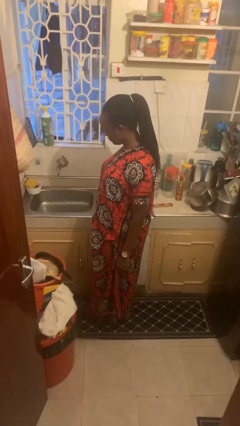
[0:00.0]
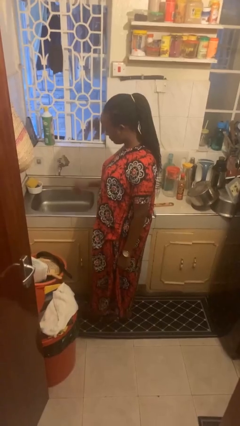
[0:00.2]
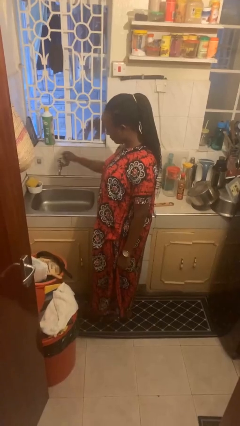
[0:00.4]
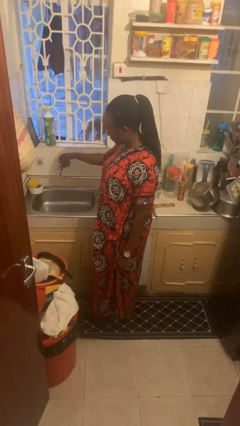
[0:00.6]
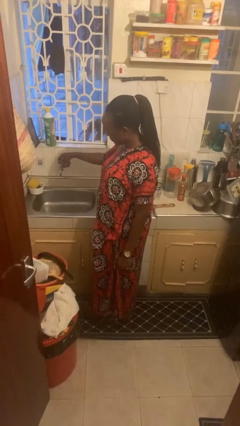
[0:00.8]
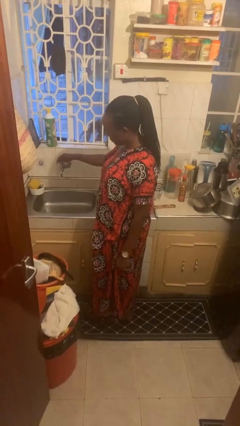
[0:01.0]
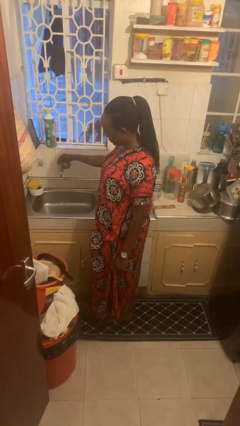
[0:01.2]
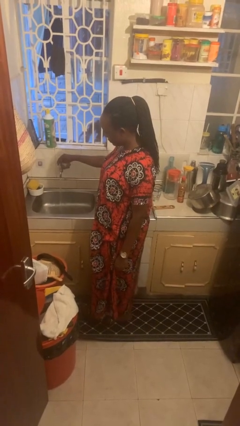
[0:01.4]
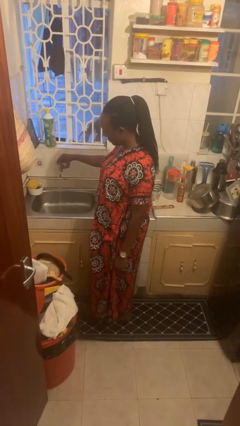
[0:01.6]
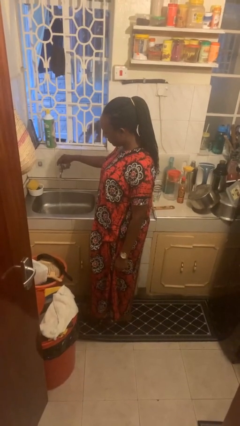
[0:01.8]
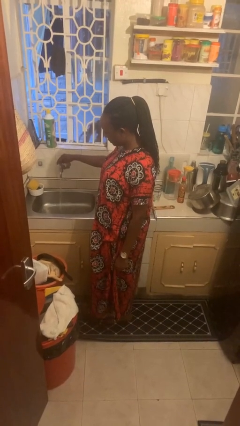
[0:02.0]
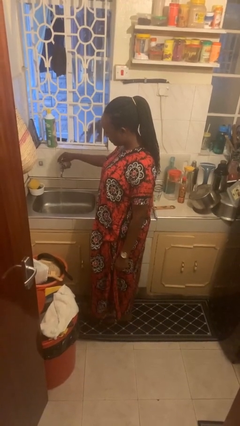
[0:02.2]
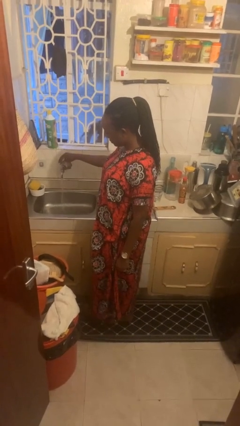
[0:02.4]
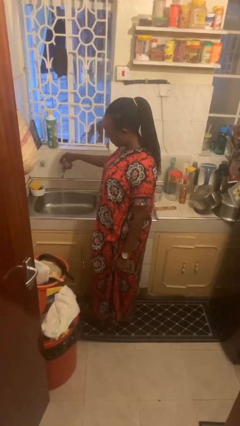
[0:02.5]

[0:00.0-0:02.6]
person turns on faucet

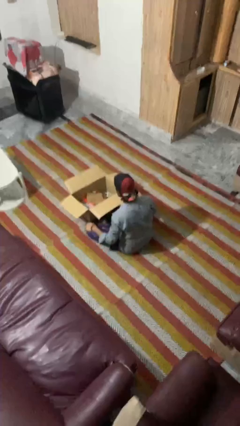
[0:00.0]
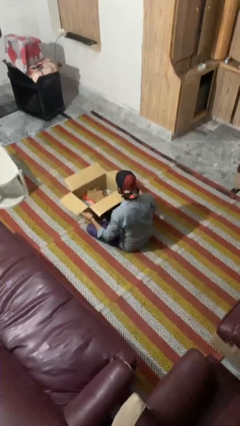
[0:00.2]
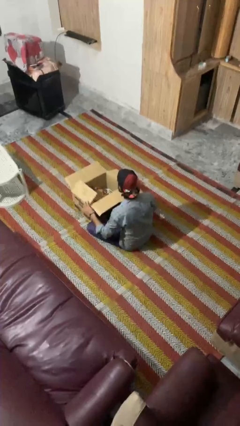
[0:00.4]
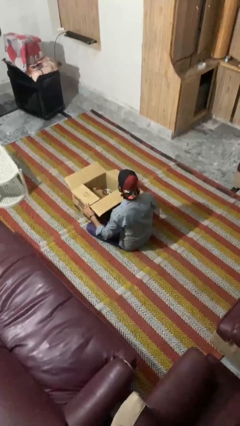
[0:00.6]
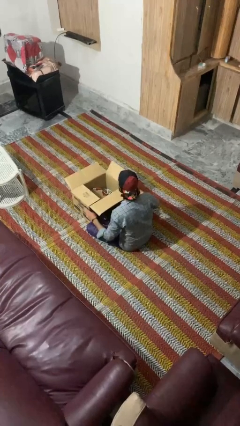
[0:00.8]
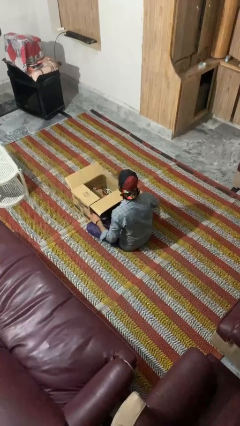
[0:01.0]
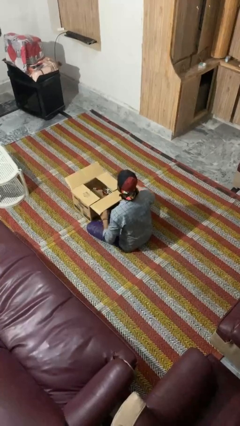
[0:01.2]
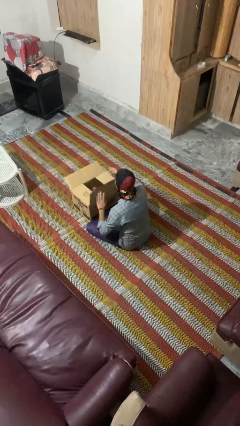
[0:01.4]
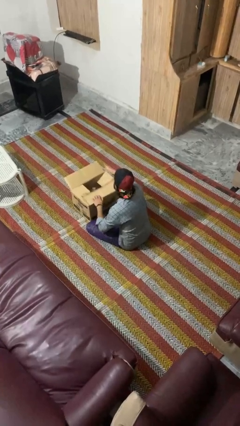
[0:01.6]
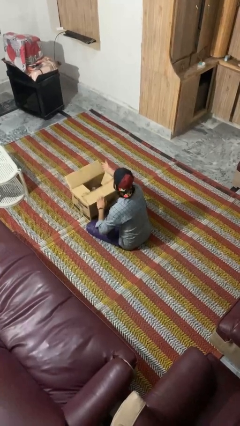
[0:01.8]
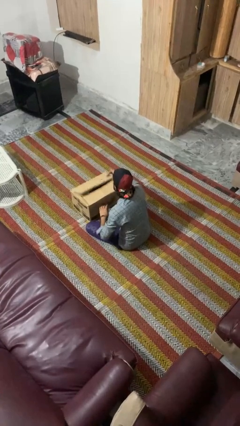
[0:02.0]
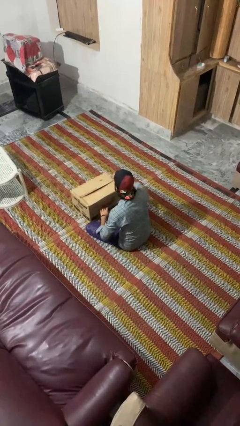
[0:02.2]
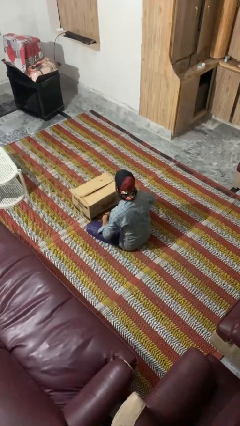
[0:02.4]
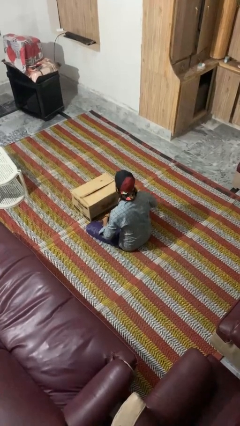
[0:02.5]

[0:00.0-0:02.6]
person closes box

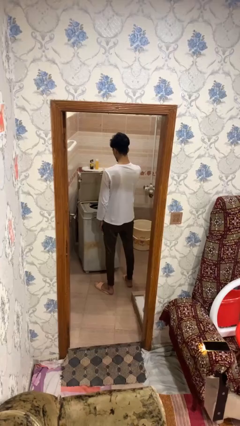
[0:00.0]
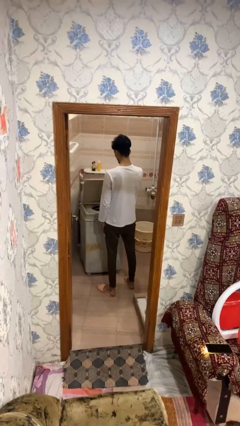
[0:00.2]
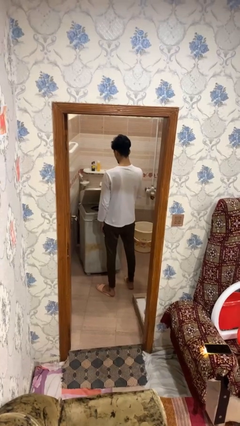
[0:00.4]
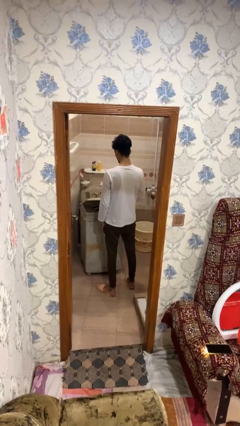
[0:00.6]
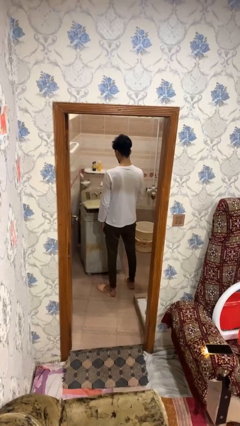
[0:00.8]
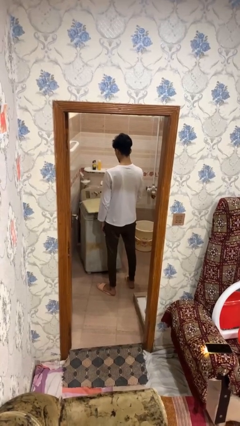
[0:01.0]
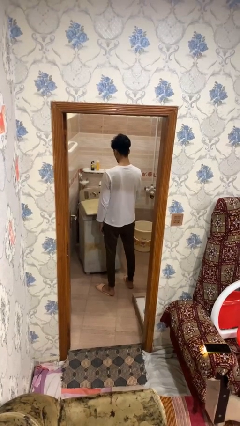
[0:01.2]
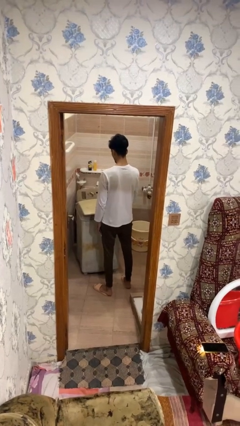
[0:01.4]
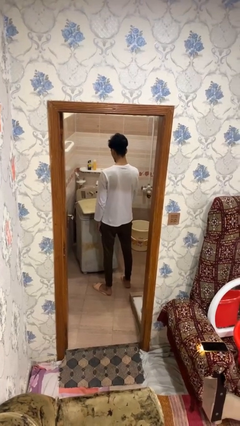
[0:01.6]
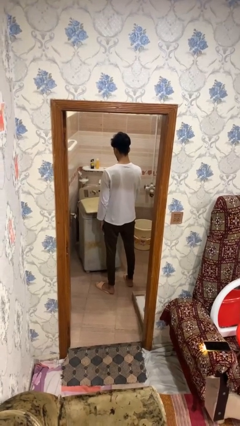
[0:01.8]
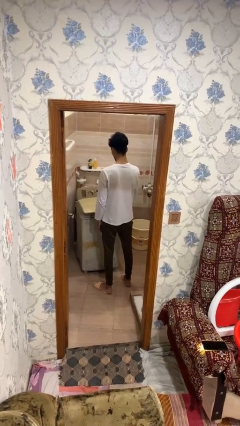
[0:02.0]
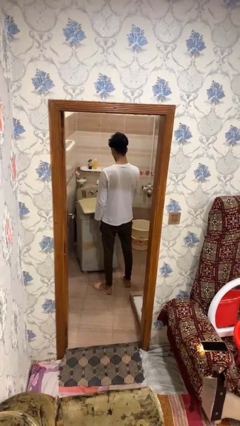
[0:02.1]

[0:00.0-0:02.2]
person closes clothes washer

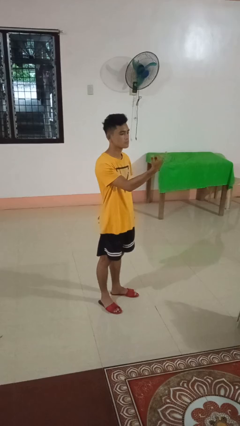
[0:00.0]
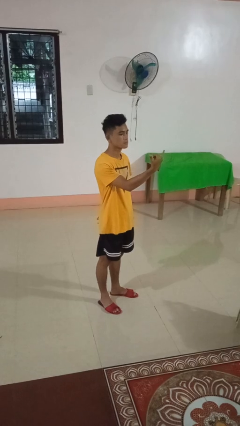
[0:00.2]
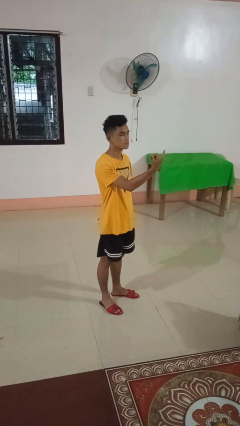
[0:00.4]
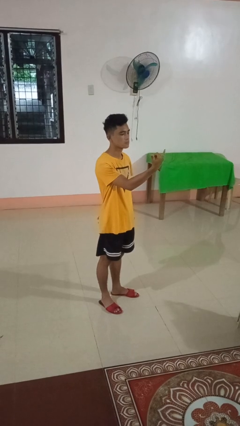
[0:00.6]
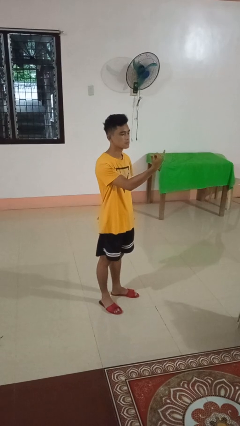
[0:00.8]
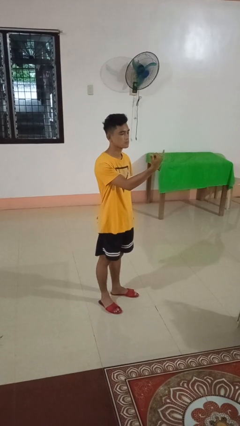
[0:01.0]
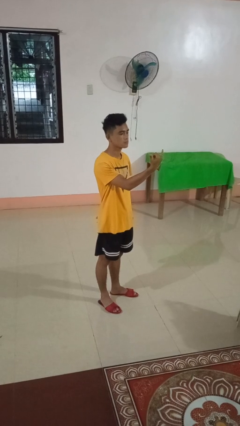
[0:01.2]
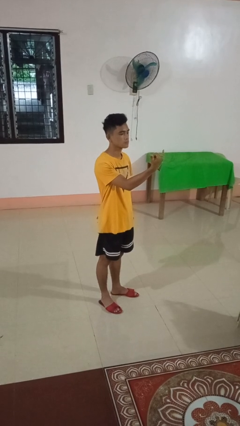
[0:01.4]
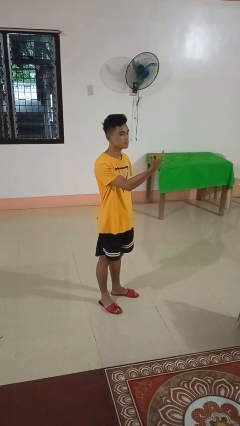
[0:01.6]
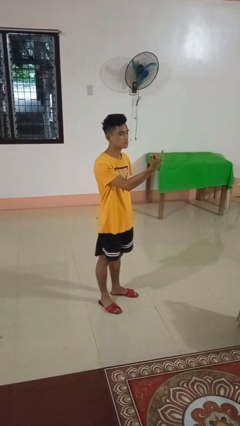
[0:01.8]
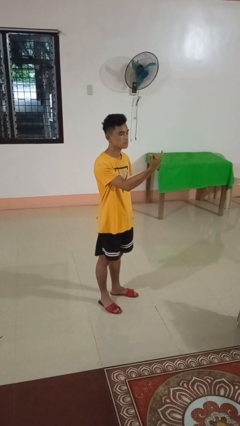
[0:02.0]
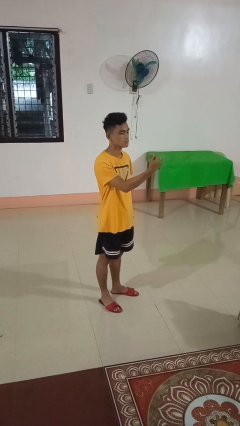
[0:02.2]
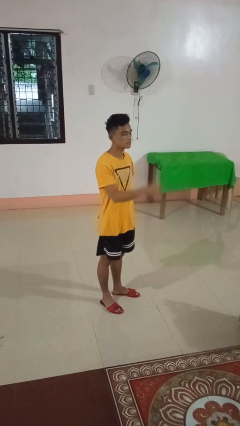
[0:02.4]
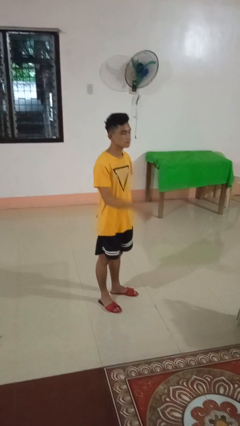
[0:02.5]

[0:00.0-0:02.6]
person gestures hang loose

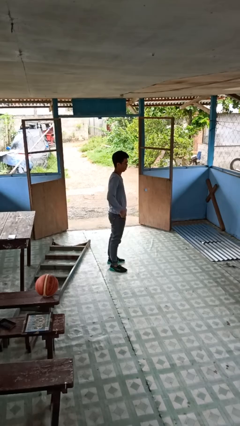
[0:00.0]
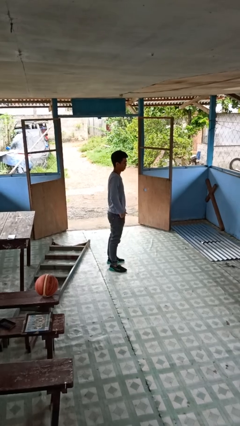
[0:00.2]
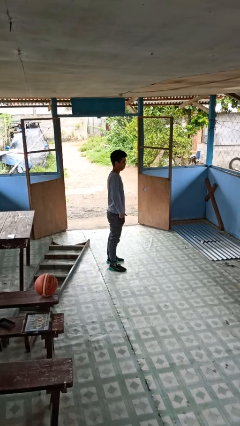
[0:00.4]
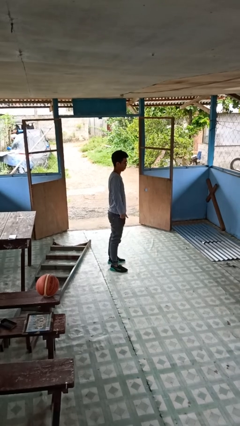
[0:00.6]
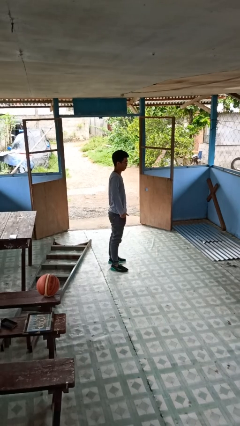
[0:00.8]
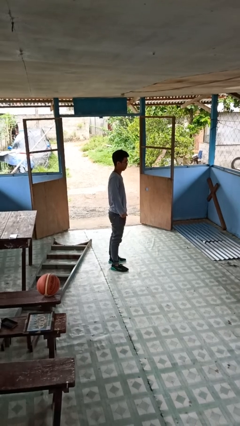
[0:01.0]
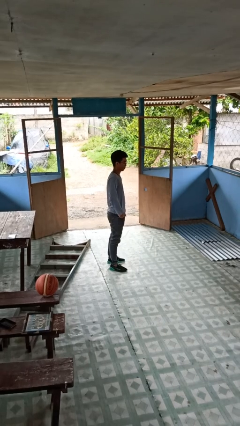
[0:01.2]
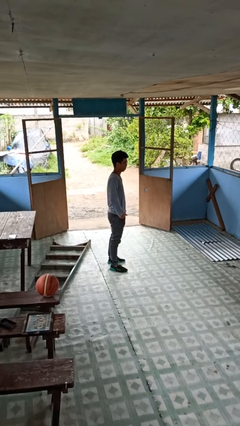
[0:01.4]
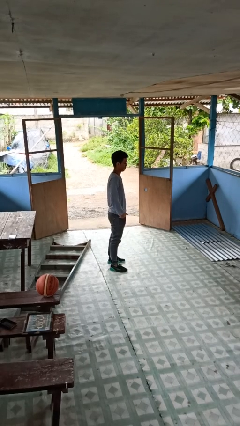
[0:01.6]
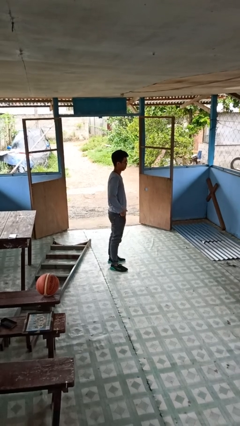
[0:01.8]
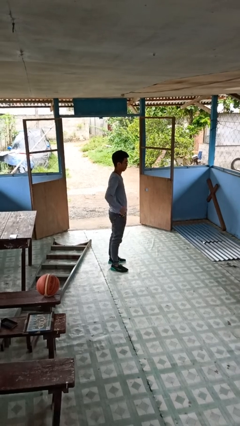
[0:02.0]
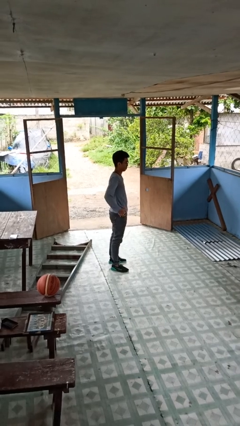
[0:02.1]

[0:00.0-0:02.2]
person puts hands in back pockets

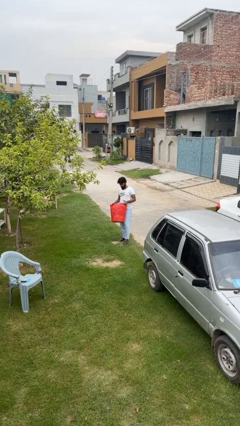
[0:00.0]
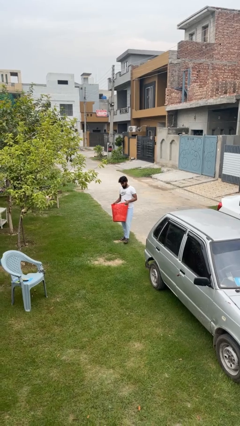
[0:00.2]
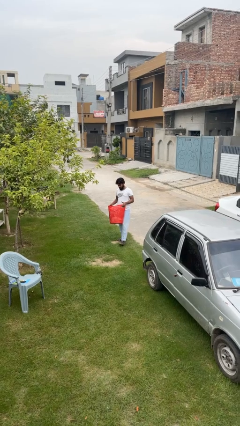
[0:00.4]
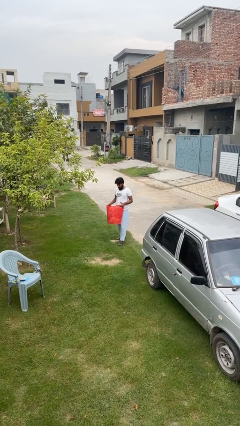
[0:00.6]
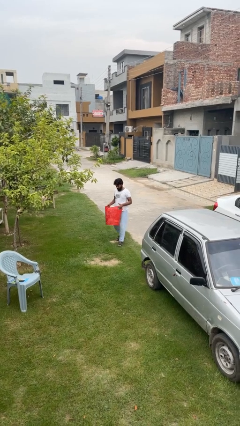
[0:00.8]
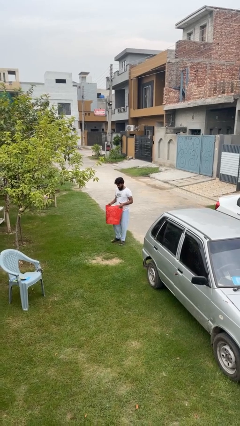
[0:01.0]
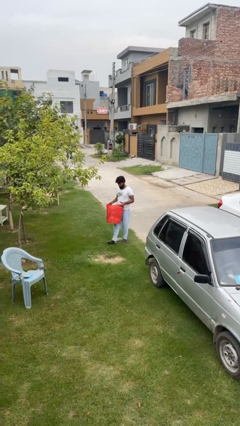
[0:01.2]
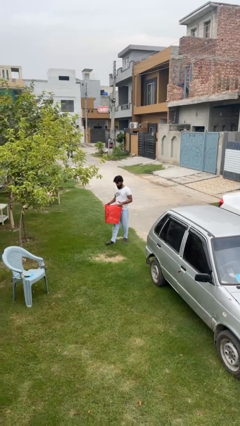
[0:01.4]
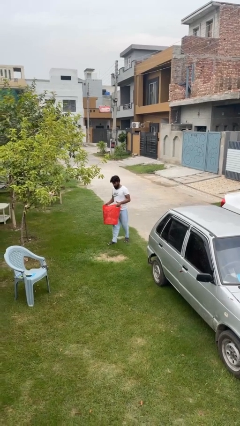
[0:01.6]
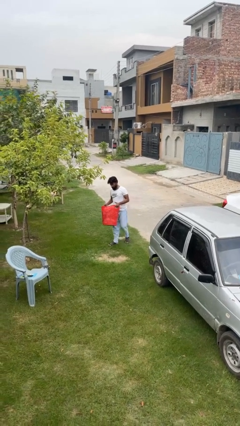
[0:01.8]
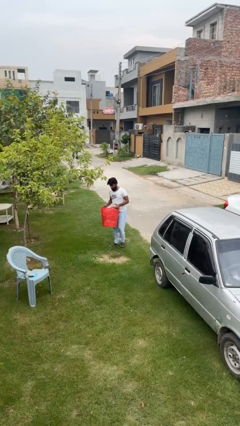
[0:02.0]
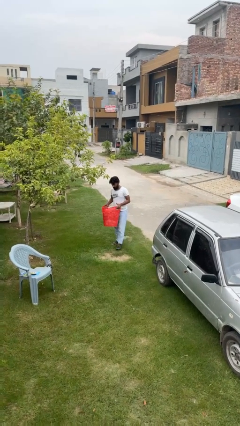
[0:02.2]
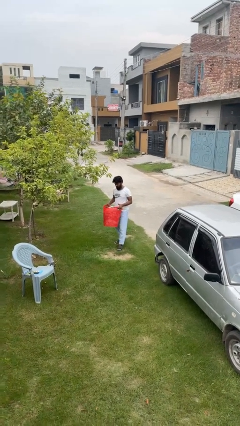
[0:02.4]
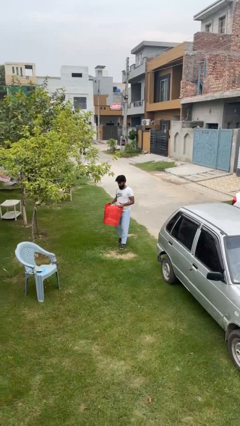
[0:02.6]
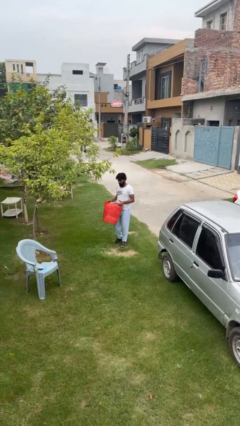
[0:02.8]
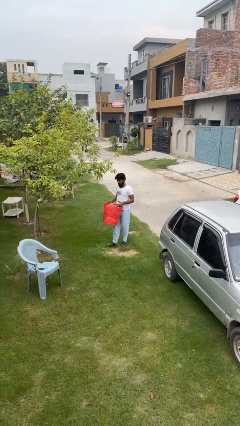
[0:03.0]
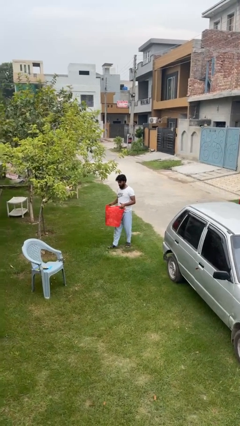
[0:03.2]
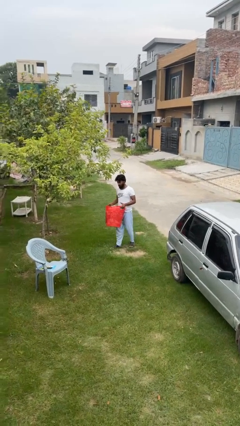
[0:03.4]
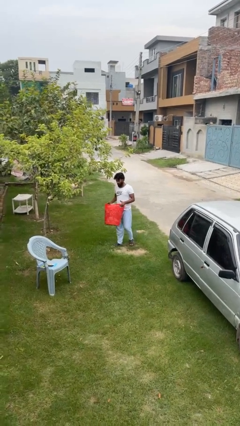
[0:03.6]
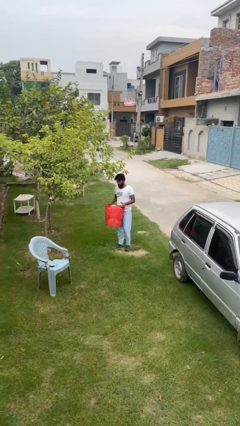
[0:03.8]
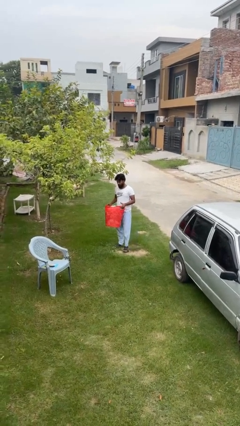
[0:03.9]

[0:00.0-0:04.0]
person carries laundry basket

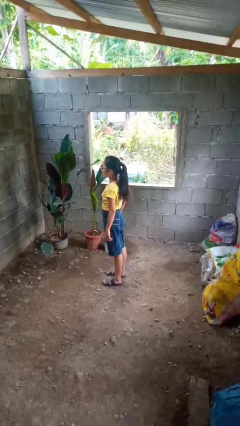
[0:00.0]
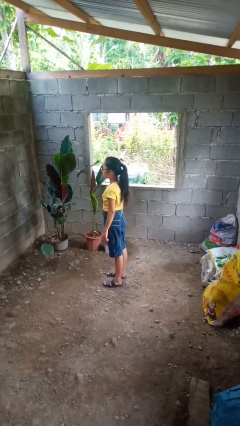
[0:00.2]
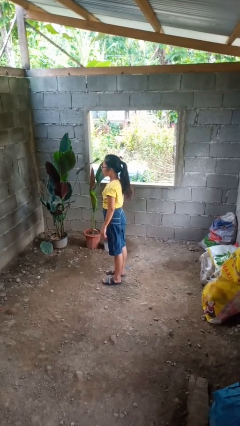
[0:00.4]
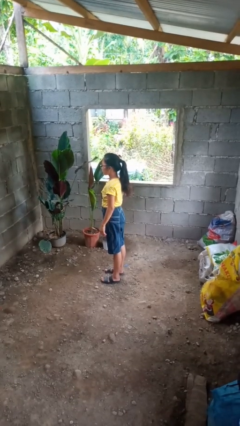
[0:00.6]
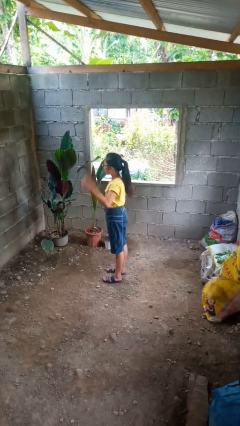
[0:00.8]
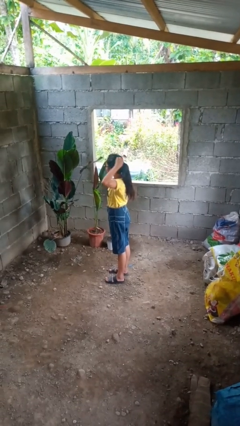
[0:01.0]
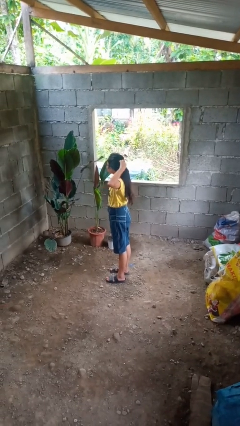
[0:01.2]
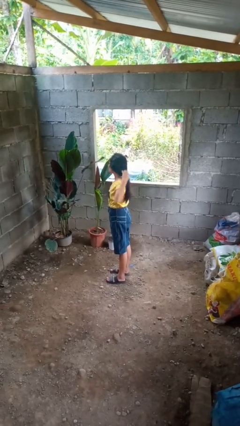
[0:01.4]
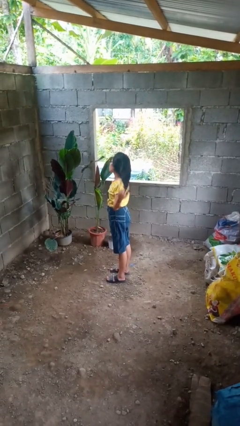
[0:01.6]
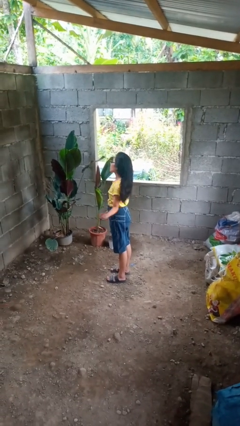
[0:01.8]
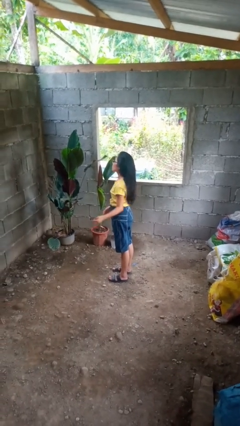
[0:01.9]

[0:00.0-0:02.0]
person takes off hairtie
